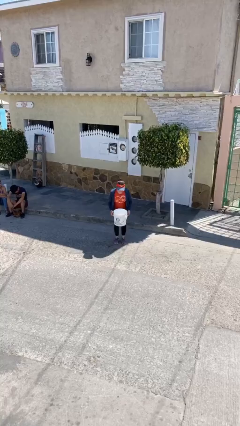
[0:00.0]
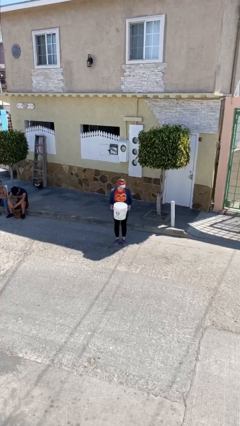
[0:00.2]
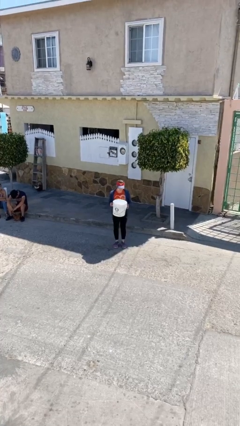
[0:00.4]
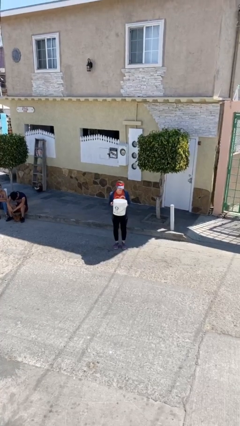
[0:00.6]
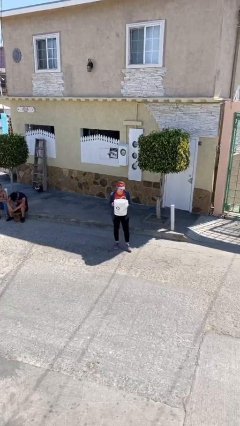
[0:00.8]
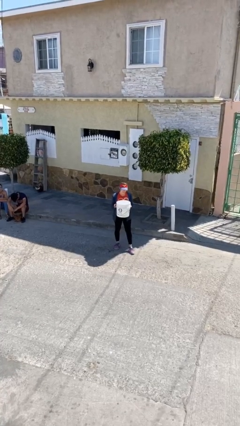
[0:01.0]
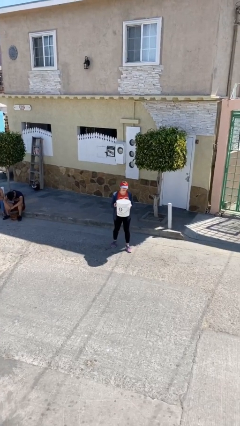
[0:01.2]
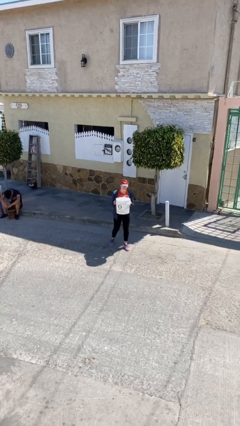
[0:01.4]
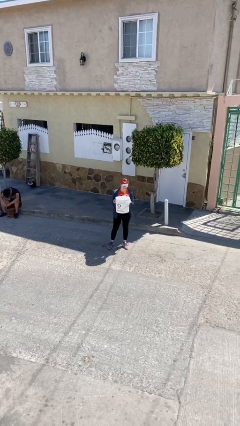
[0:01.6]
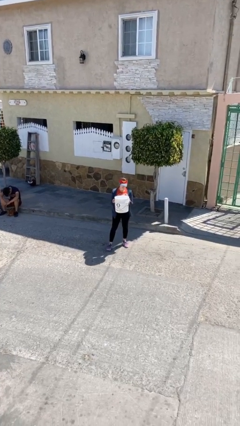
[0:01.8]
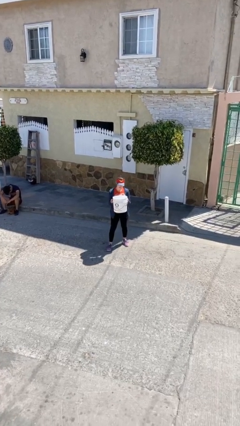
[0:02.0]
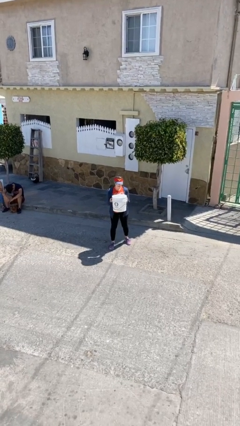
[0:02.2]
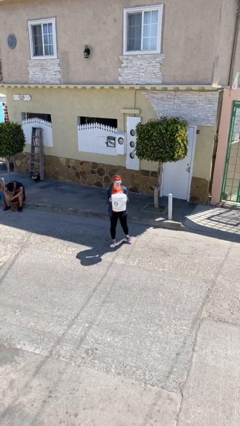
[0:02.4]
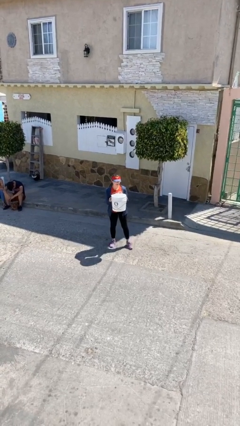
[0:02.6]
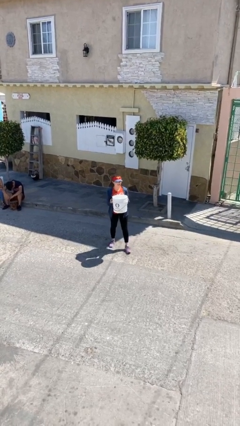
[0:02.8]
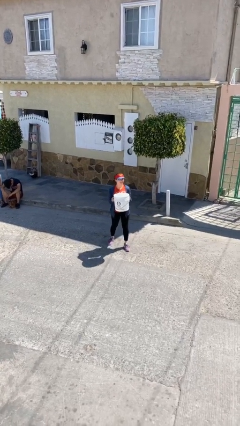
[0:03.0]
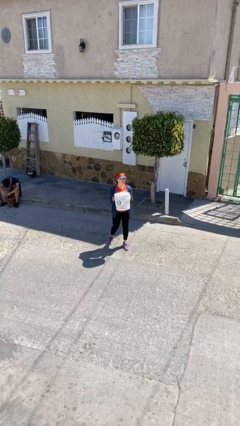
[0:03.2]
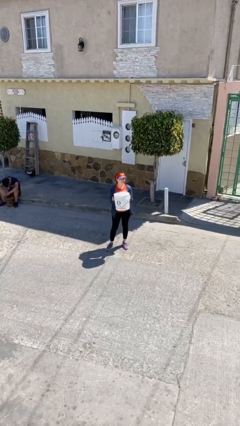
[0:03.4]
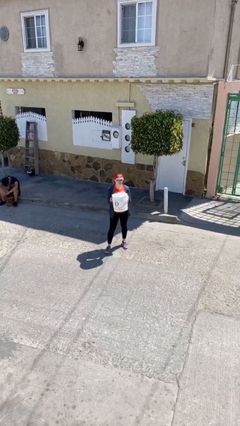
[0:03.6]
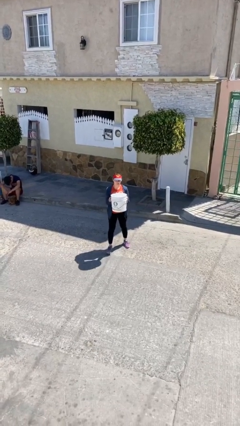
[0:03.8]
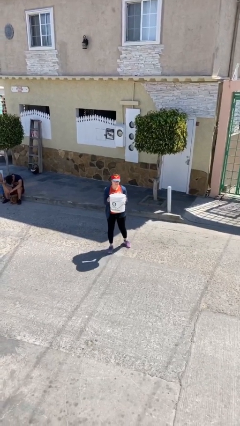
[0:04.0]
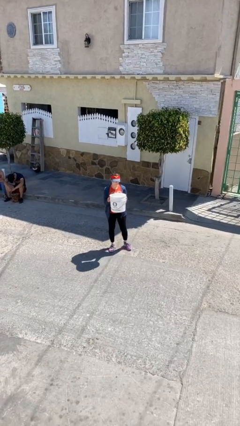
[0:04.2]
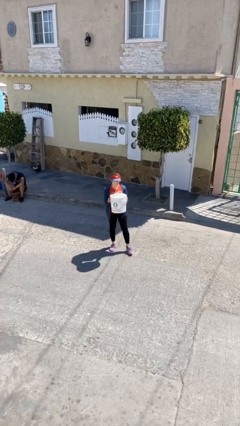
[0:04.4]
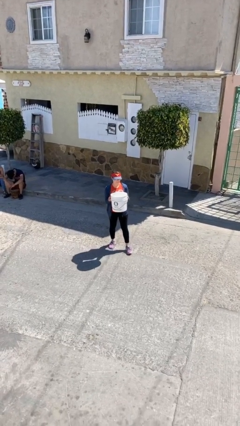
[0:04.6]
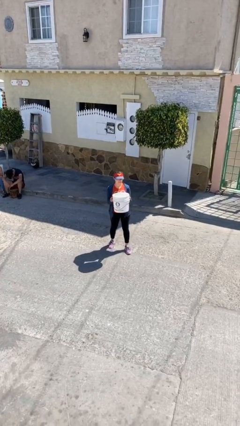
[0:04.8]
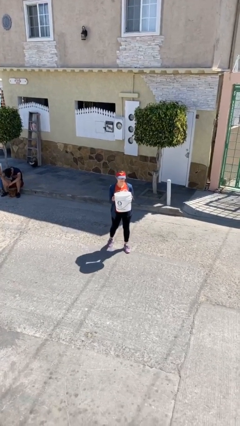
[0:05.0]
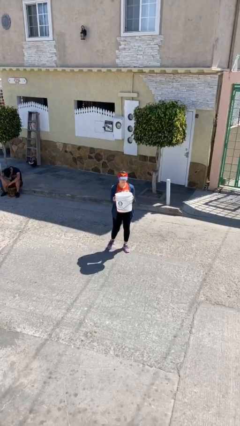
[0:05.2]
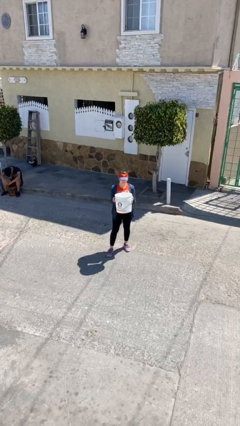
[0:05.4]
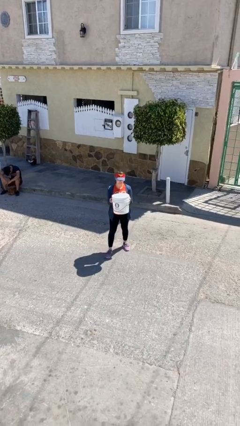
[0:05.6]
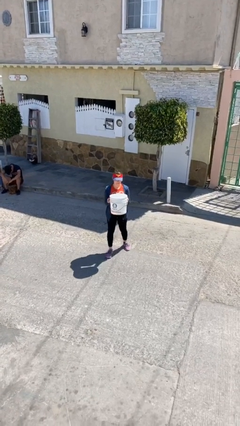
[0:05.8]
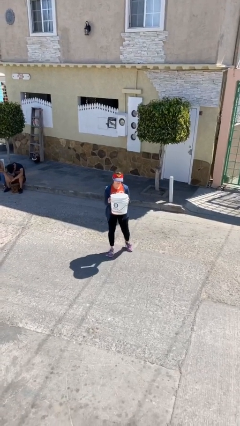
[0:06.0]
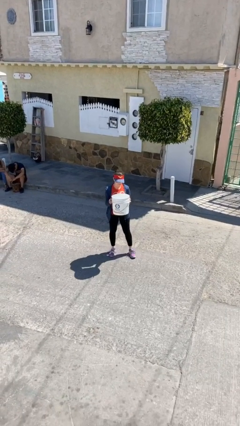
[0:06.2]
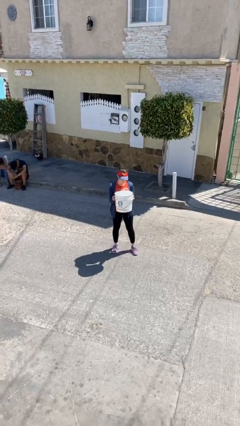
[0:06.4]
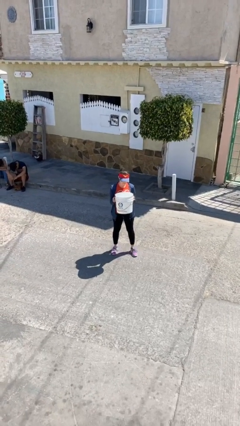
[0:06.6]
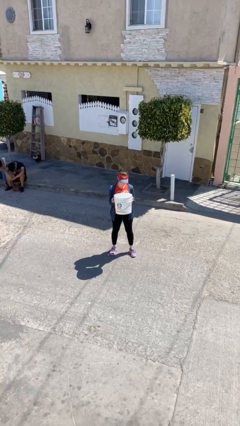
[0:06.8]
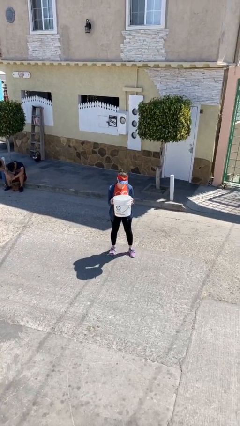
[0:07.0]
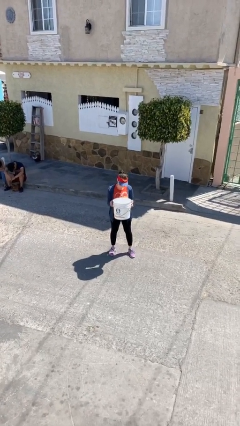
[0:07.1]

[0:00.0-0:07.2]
person carries heavy object

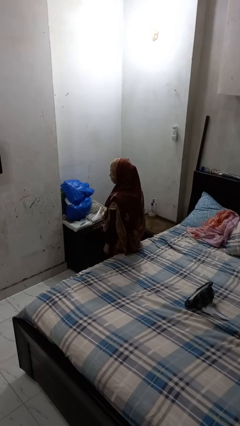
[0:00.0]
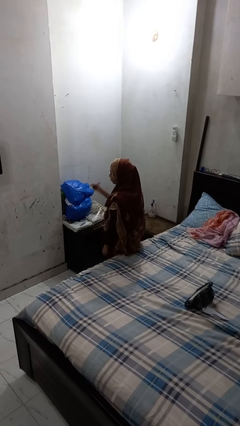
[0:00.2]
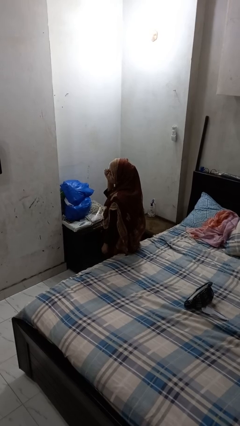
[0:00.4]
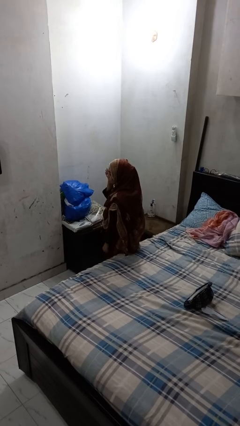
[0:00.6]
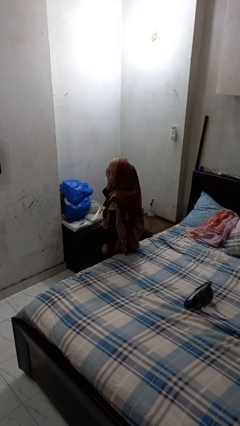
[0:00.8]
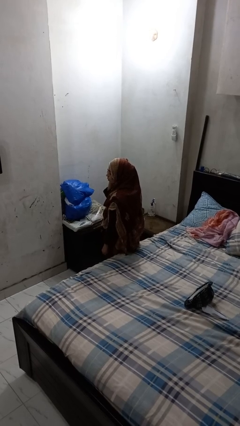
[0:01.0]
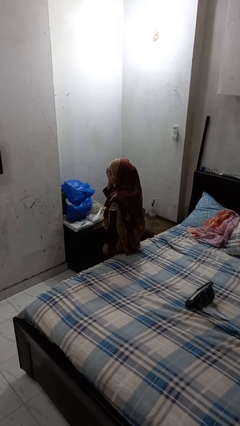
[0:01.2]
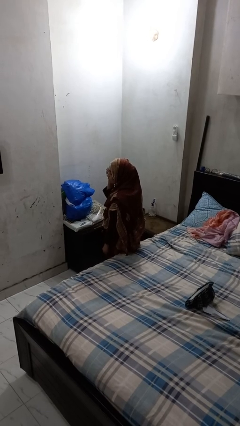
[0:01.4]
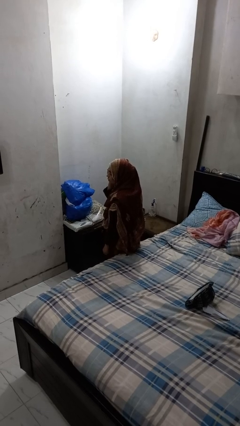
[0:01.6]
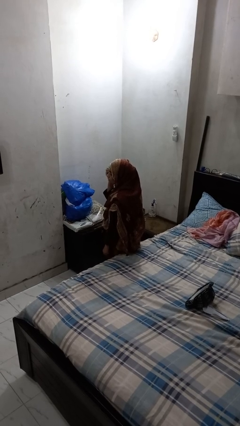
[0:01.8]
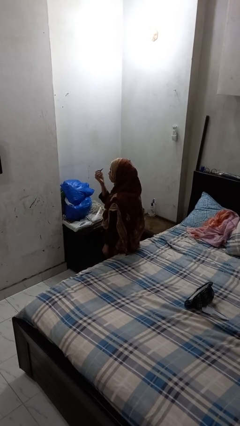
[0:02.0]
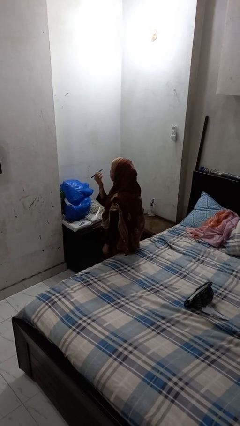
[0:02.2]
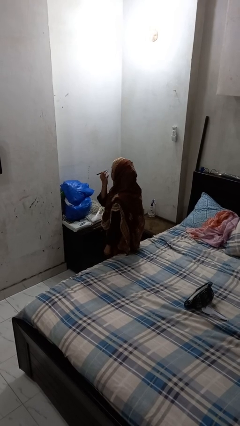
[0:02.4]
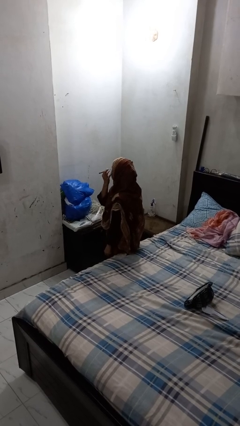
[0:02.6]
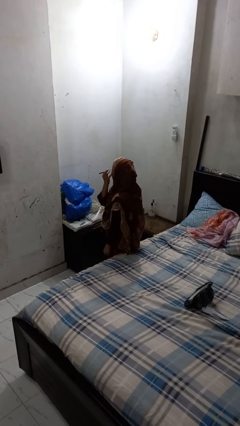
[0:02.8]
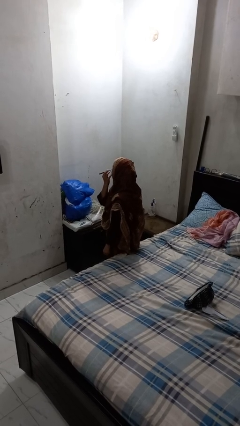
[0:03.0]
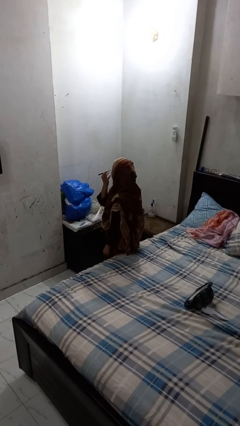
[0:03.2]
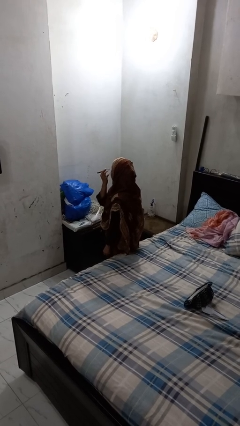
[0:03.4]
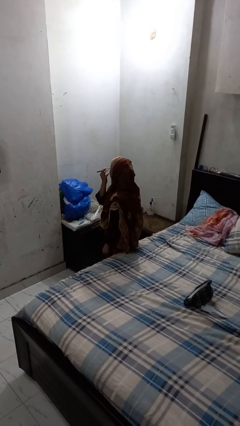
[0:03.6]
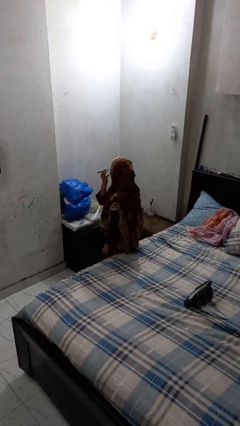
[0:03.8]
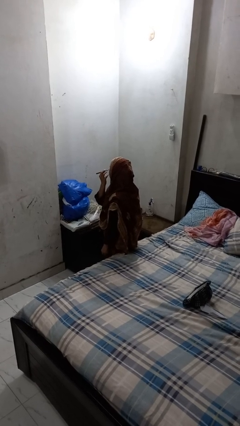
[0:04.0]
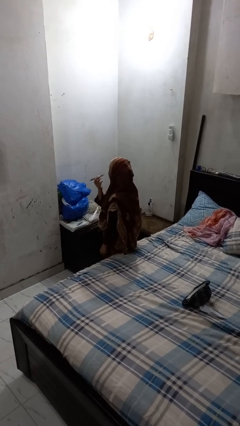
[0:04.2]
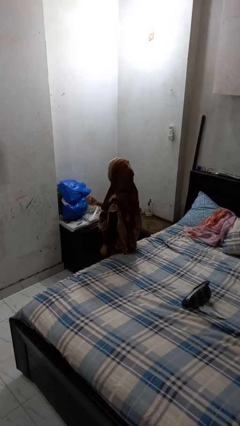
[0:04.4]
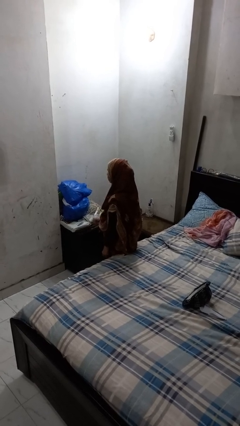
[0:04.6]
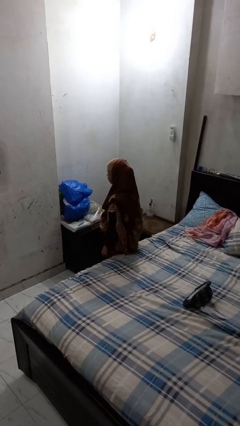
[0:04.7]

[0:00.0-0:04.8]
person applies eye makeup

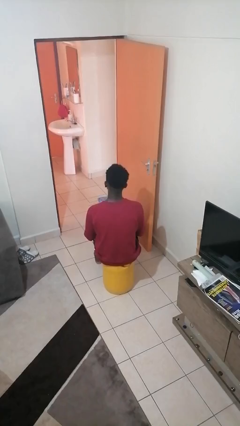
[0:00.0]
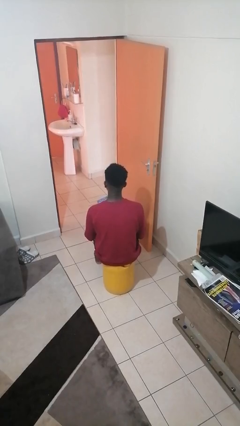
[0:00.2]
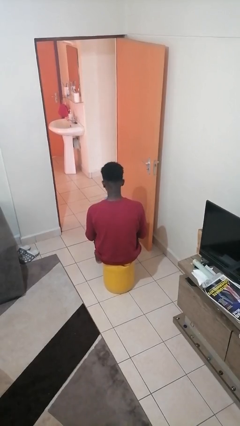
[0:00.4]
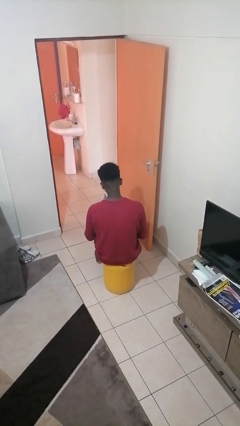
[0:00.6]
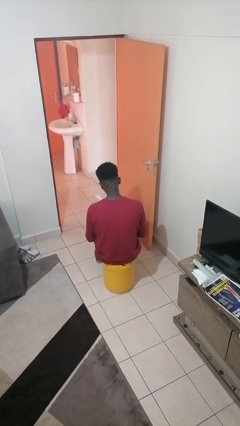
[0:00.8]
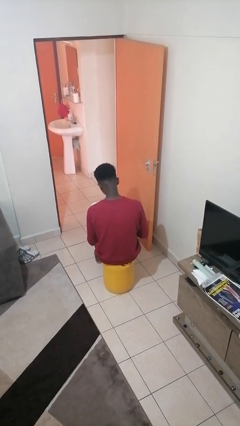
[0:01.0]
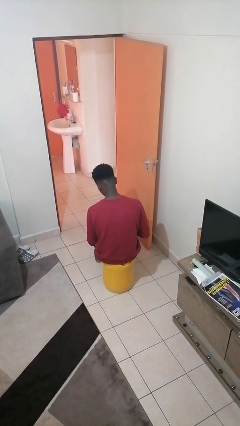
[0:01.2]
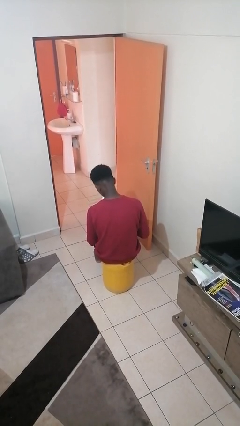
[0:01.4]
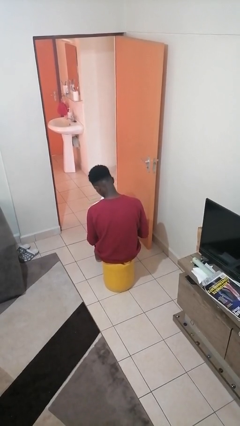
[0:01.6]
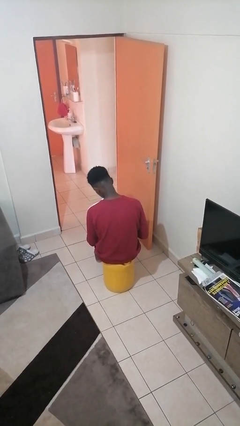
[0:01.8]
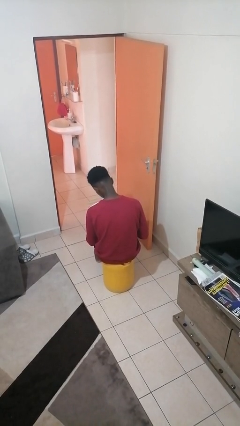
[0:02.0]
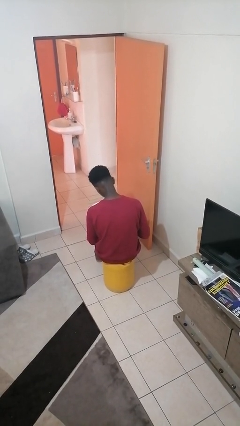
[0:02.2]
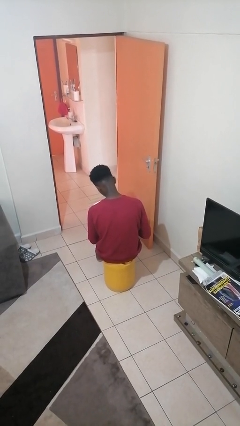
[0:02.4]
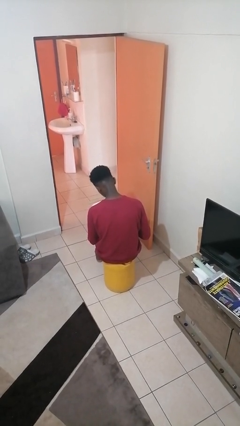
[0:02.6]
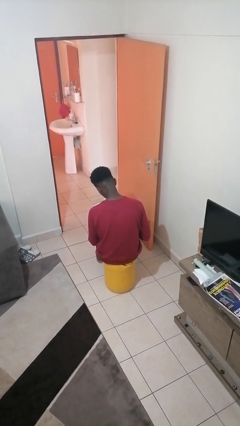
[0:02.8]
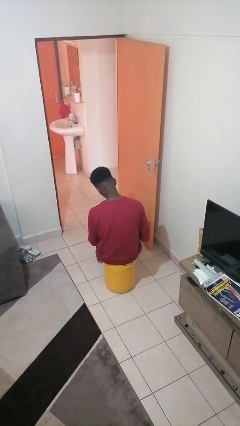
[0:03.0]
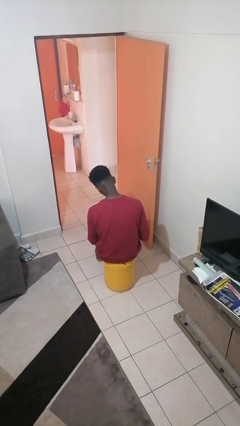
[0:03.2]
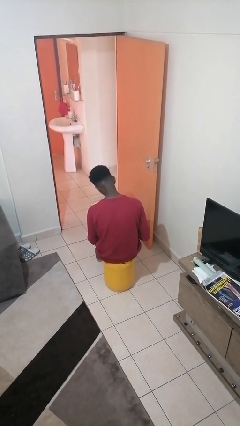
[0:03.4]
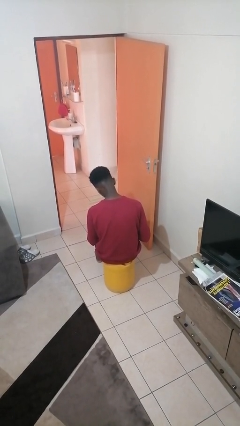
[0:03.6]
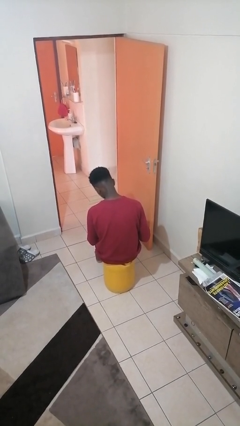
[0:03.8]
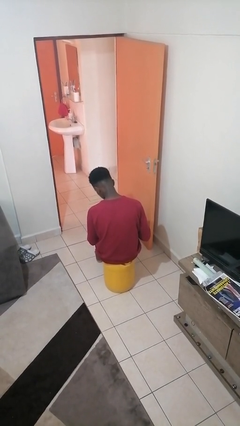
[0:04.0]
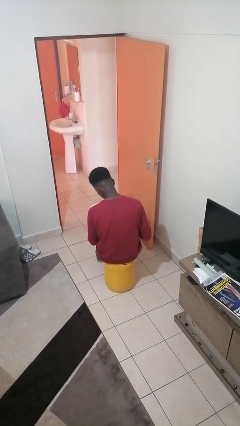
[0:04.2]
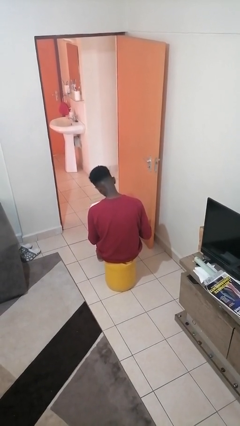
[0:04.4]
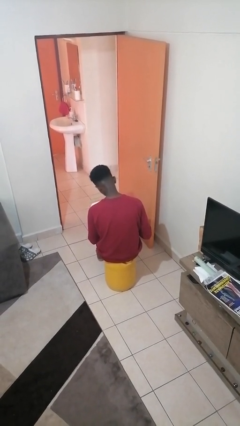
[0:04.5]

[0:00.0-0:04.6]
person reads book

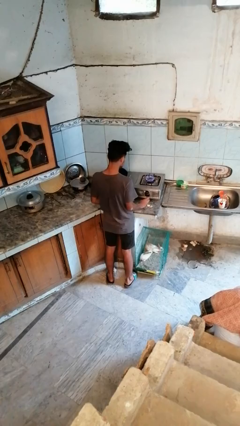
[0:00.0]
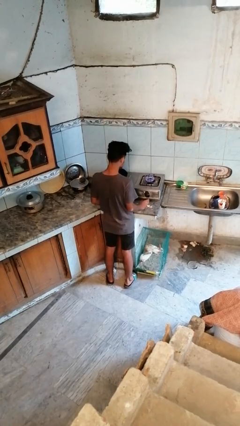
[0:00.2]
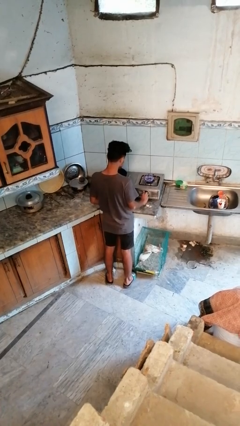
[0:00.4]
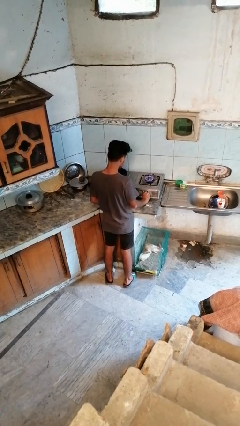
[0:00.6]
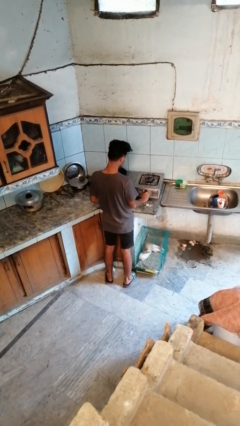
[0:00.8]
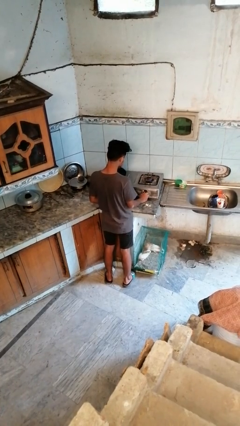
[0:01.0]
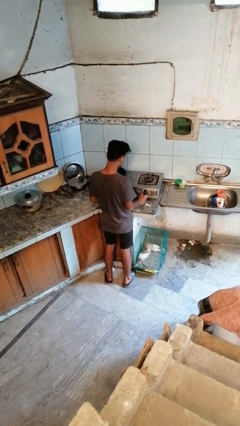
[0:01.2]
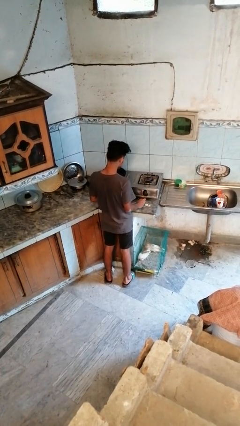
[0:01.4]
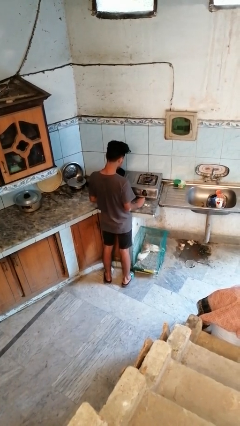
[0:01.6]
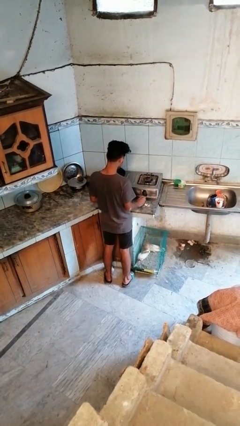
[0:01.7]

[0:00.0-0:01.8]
person turns off stovetop
